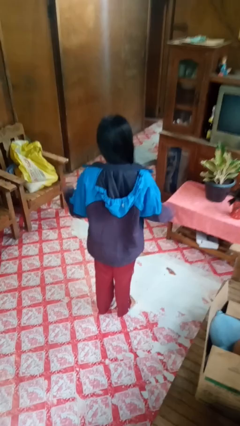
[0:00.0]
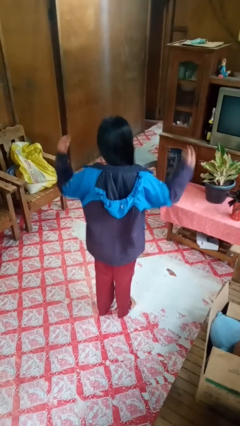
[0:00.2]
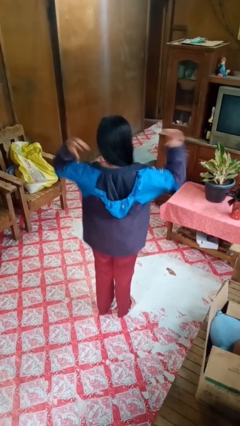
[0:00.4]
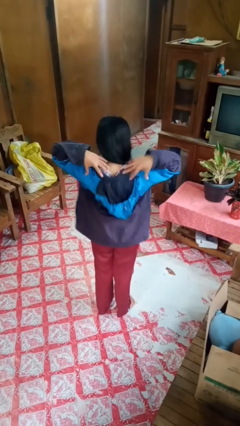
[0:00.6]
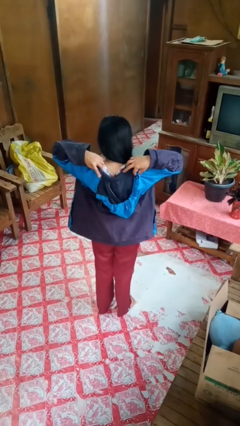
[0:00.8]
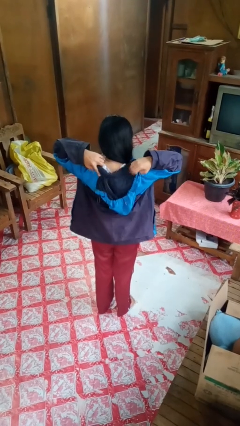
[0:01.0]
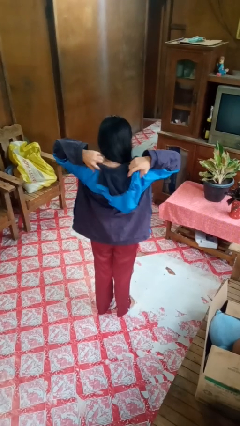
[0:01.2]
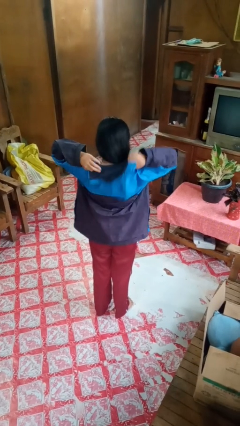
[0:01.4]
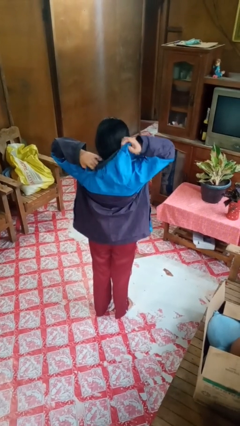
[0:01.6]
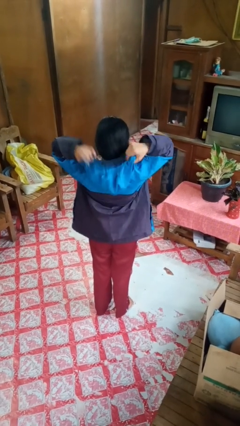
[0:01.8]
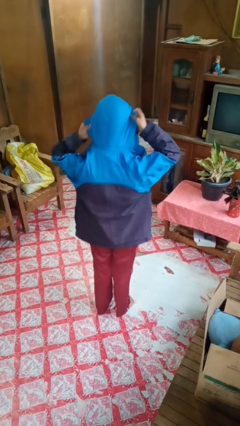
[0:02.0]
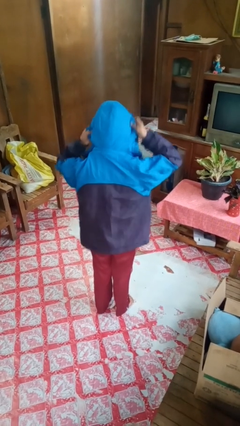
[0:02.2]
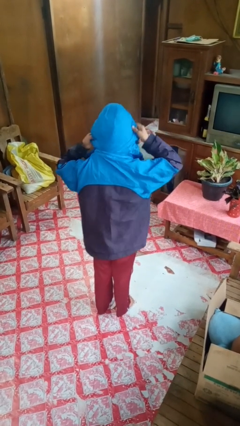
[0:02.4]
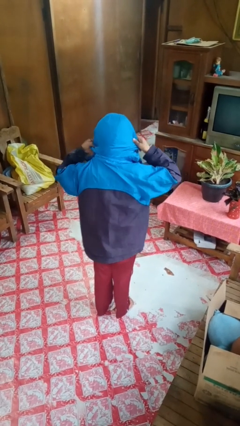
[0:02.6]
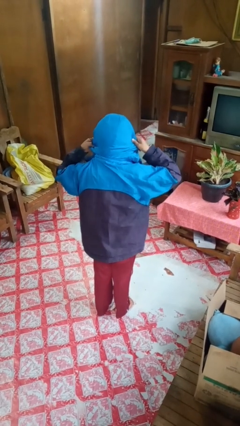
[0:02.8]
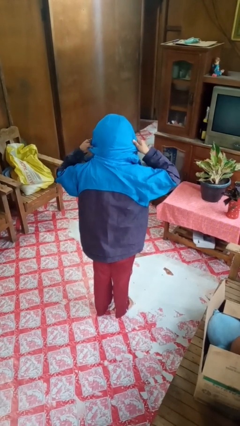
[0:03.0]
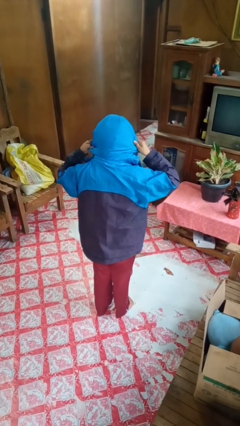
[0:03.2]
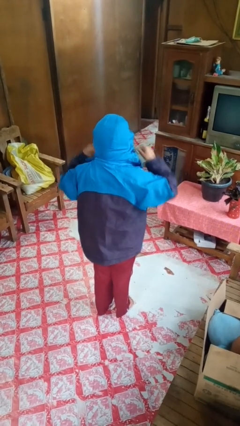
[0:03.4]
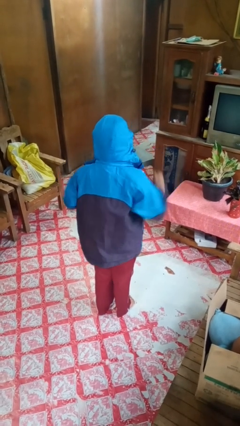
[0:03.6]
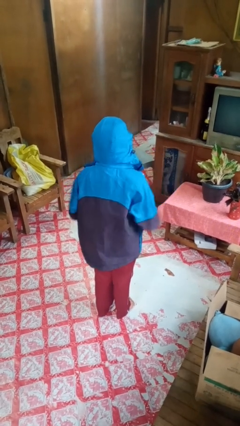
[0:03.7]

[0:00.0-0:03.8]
person puts on hoodie

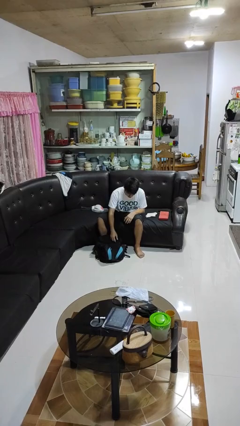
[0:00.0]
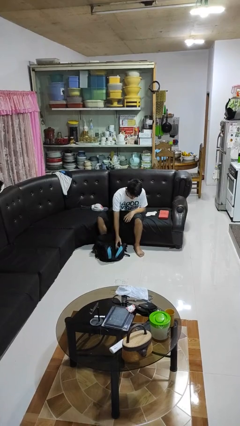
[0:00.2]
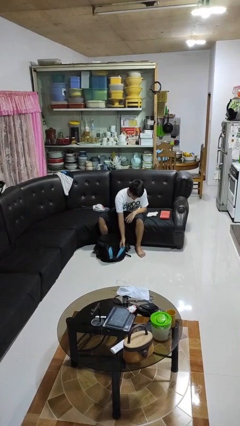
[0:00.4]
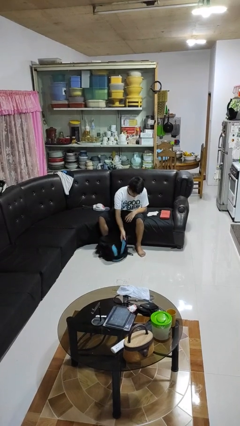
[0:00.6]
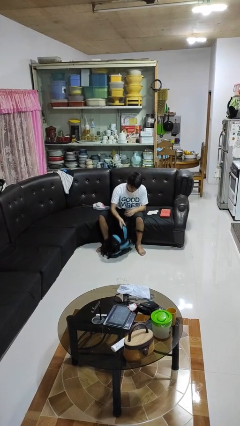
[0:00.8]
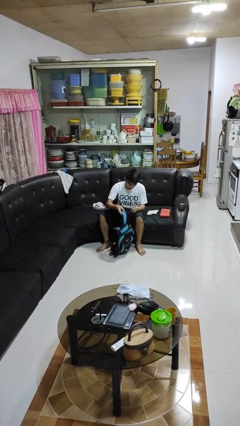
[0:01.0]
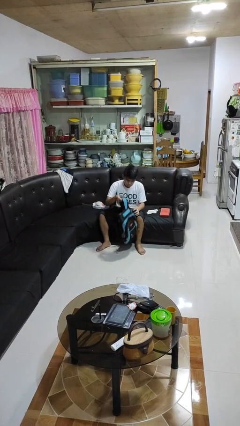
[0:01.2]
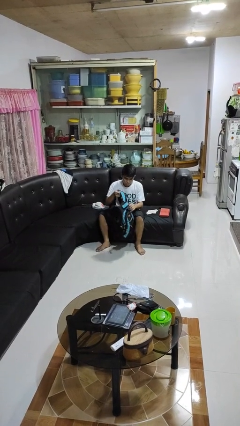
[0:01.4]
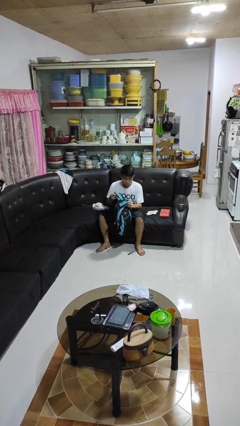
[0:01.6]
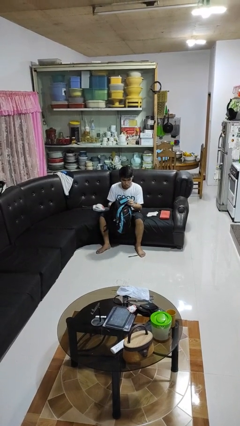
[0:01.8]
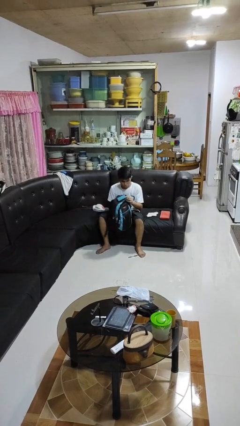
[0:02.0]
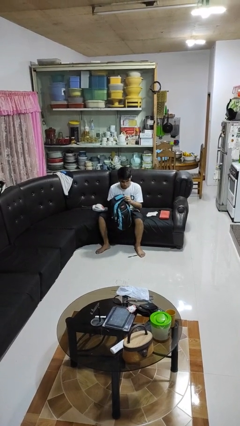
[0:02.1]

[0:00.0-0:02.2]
person picks up object from floor

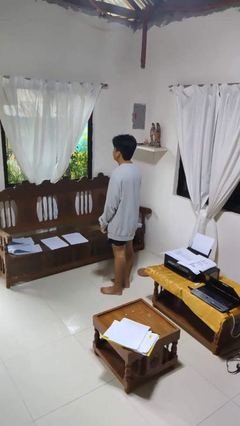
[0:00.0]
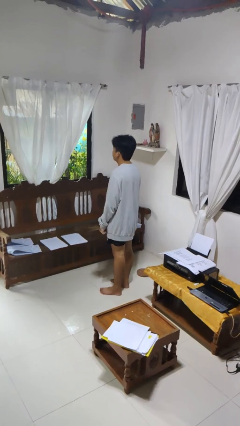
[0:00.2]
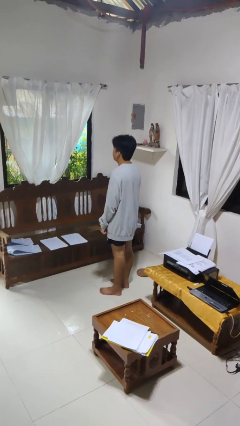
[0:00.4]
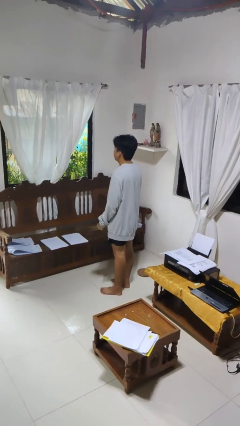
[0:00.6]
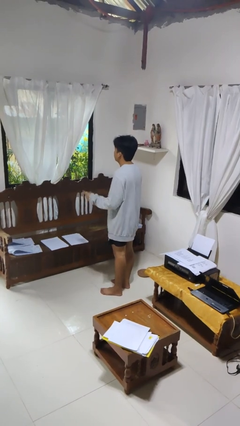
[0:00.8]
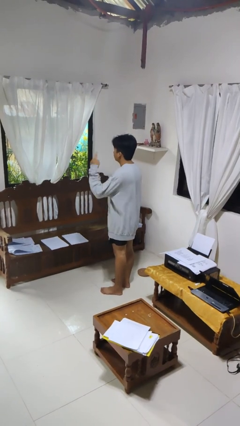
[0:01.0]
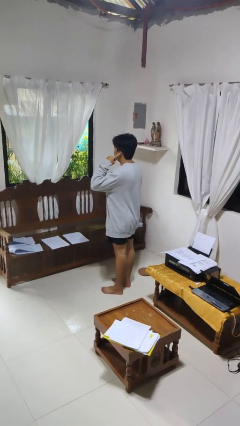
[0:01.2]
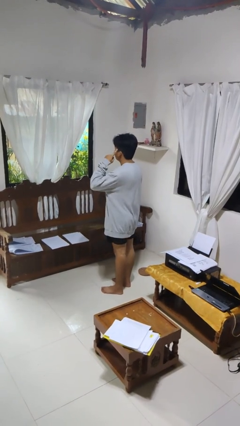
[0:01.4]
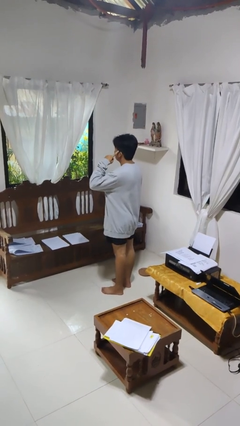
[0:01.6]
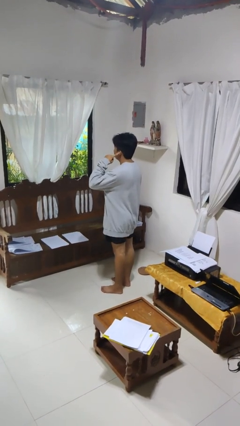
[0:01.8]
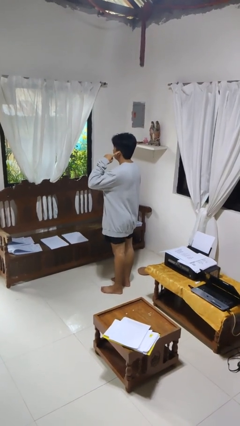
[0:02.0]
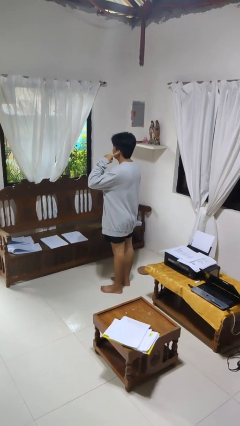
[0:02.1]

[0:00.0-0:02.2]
person gestures listen closely

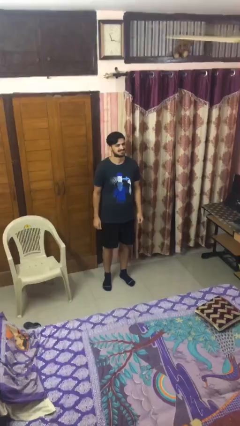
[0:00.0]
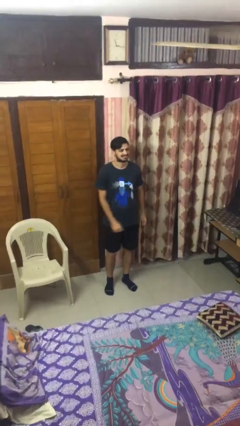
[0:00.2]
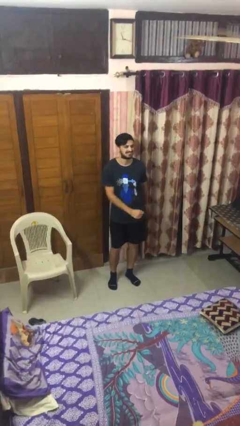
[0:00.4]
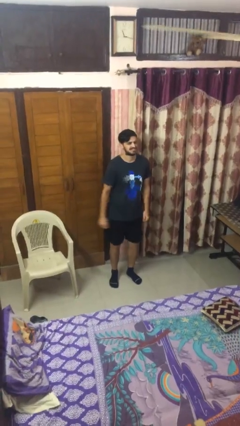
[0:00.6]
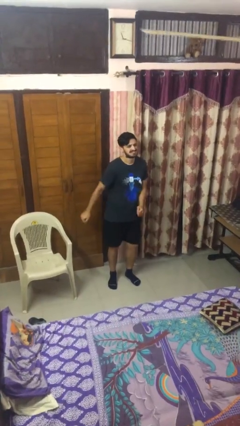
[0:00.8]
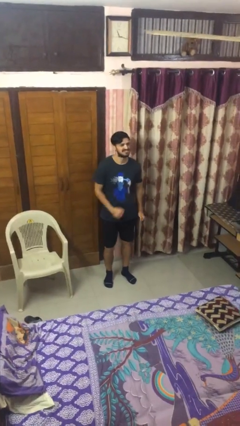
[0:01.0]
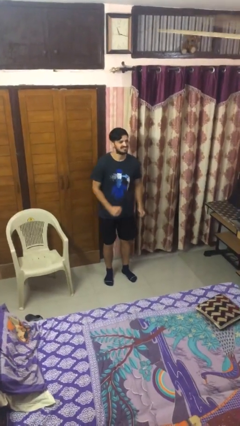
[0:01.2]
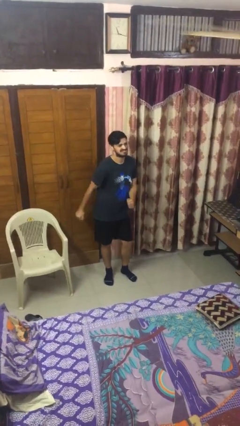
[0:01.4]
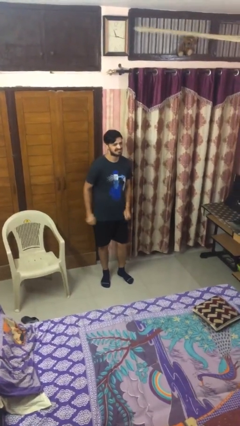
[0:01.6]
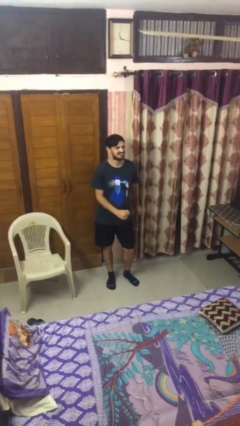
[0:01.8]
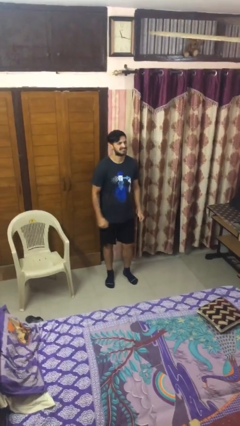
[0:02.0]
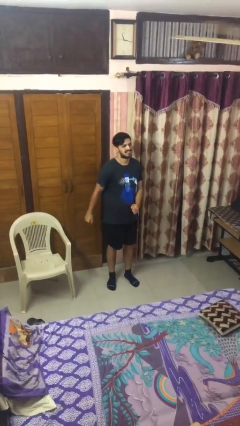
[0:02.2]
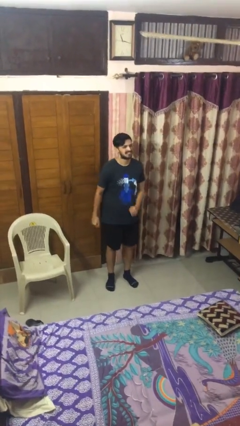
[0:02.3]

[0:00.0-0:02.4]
person dances in place

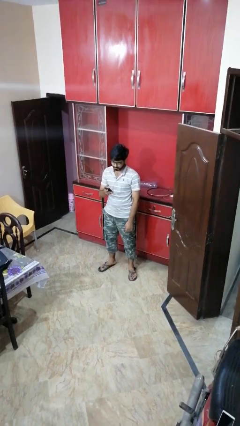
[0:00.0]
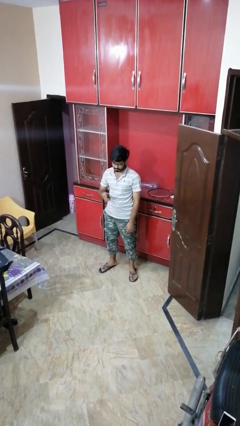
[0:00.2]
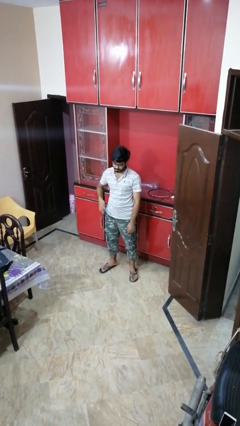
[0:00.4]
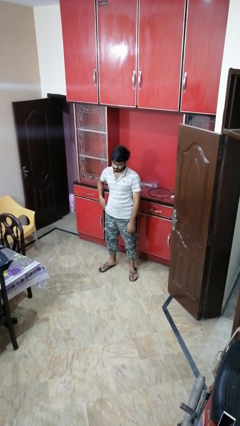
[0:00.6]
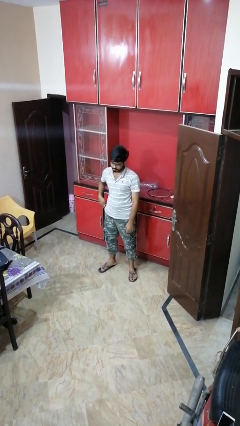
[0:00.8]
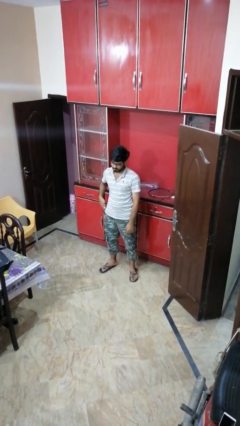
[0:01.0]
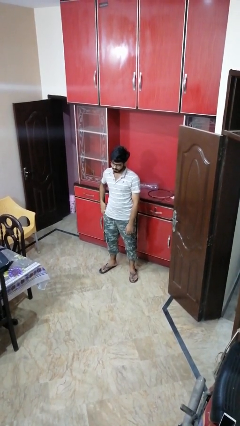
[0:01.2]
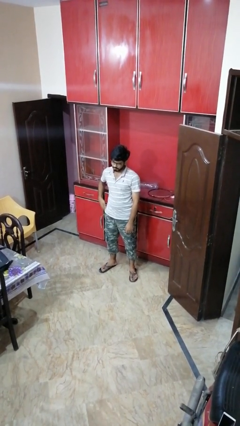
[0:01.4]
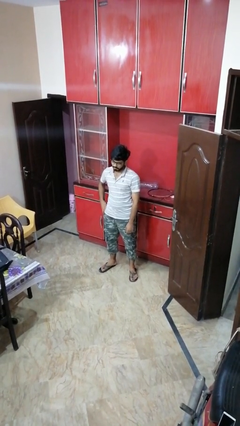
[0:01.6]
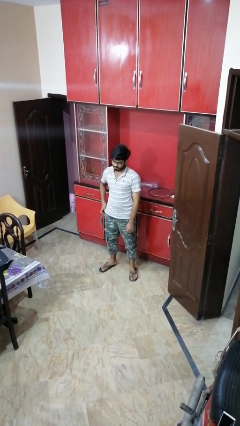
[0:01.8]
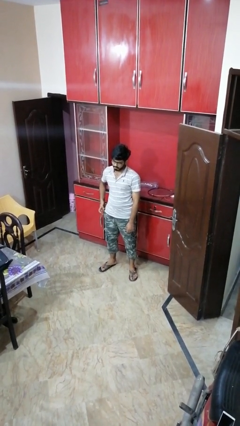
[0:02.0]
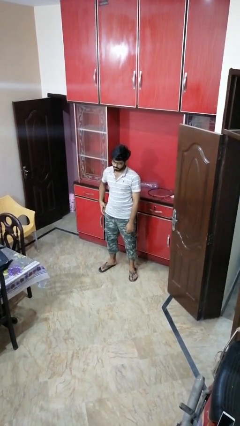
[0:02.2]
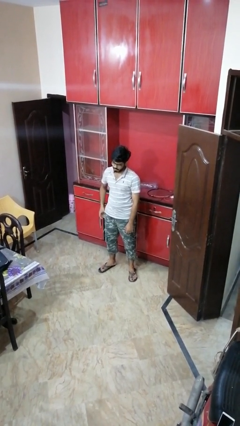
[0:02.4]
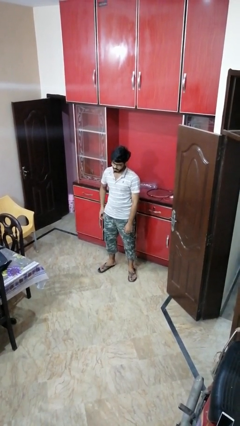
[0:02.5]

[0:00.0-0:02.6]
person puts phone into pocket

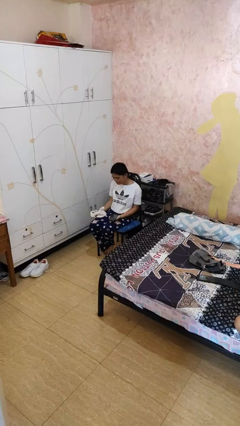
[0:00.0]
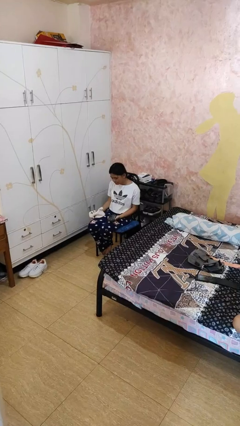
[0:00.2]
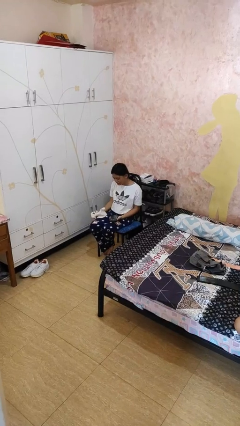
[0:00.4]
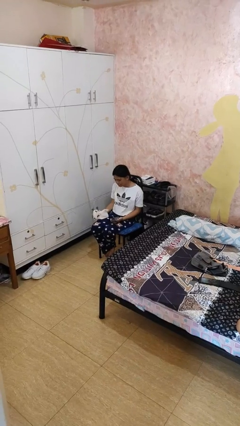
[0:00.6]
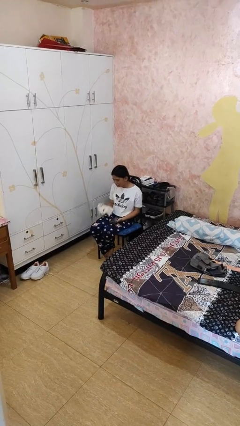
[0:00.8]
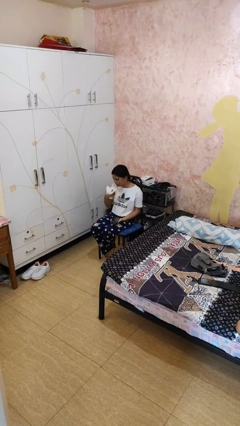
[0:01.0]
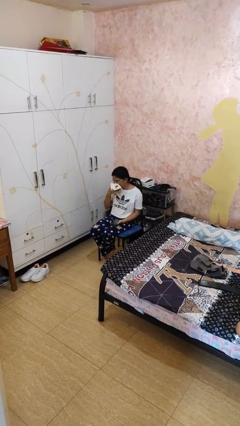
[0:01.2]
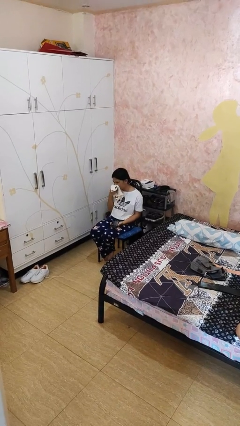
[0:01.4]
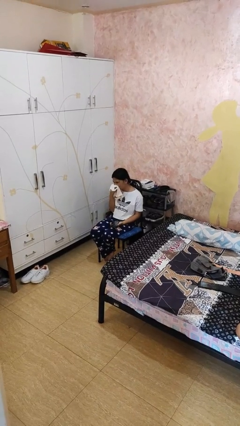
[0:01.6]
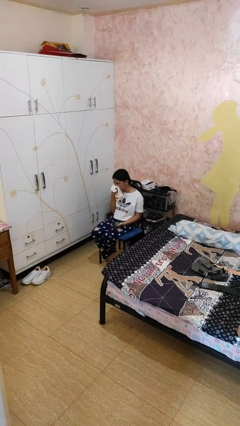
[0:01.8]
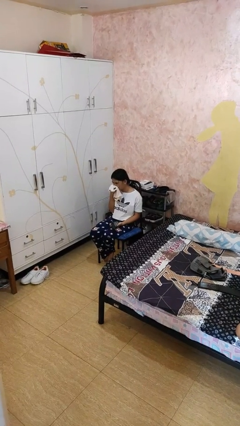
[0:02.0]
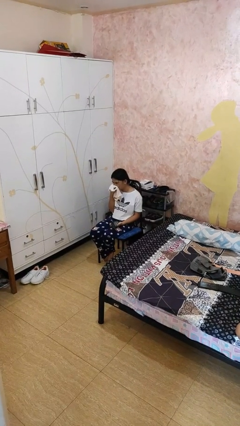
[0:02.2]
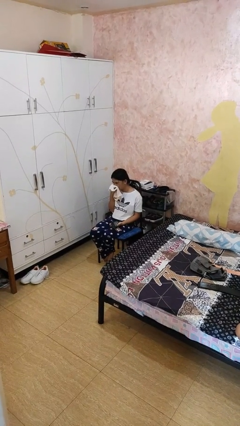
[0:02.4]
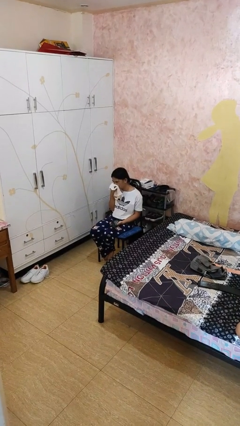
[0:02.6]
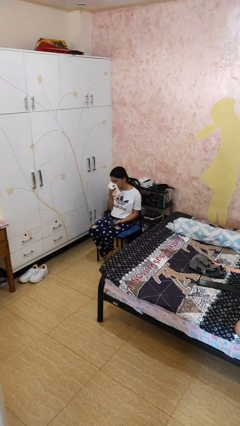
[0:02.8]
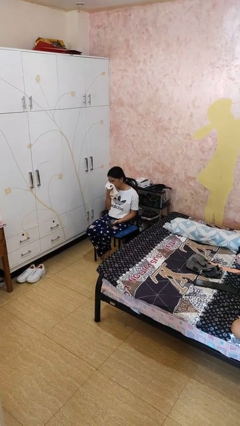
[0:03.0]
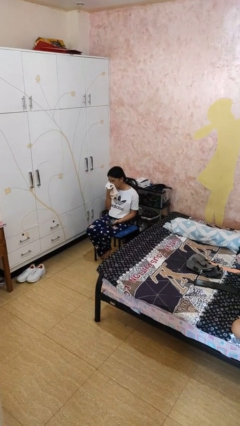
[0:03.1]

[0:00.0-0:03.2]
person blows nose

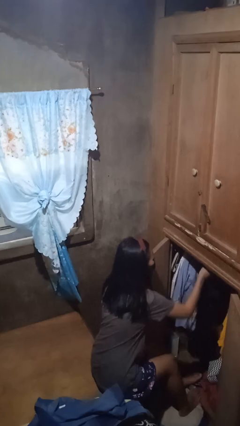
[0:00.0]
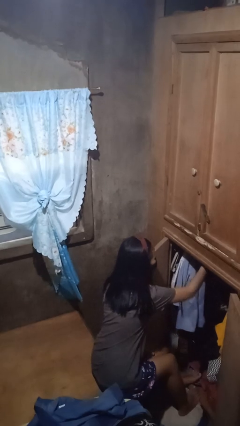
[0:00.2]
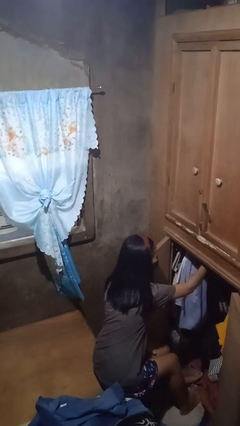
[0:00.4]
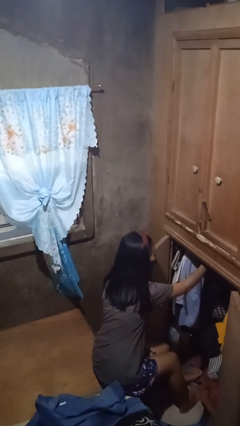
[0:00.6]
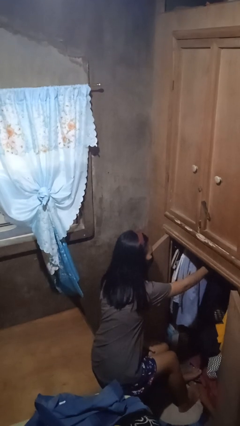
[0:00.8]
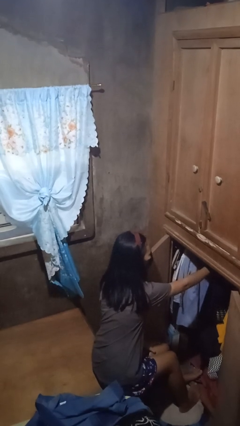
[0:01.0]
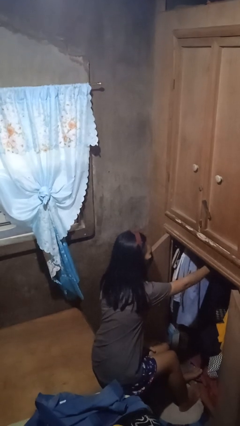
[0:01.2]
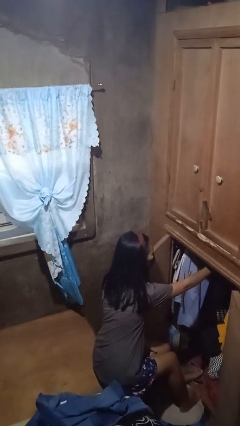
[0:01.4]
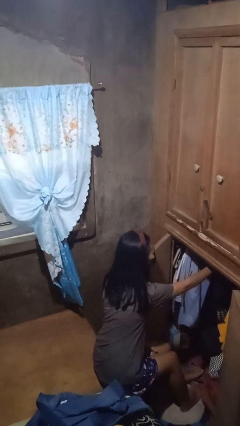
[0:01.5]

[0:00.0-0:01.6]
person puts clothes into closet
